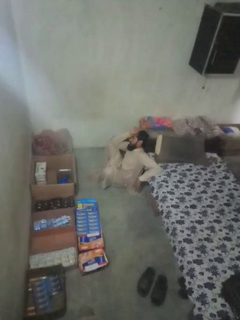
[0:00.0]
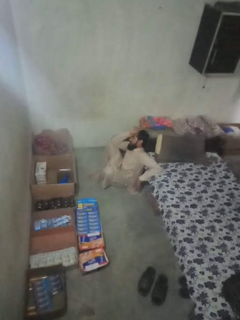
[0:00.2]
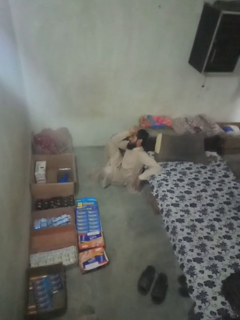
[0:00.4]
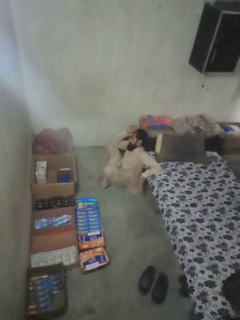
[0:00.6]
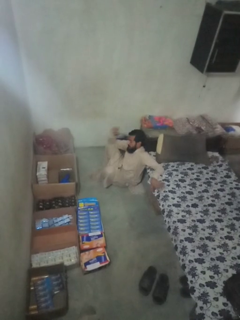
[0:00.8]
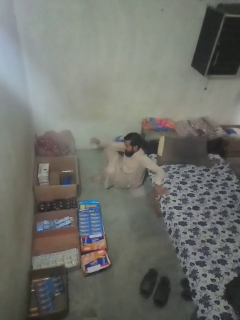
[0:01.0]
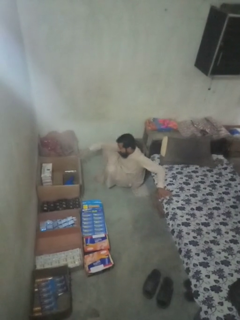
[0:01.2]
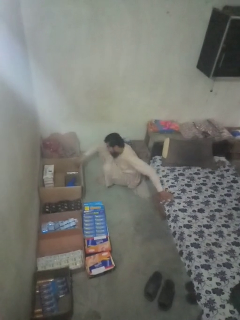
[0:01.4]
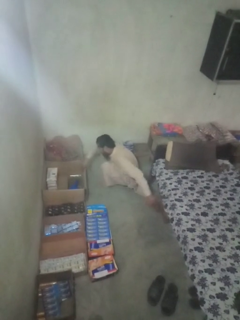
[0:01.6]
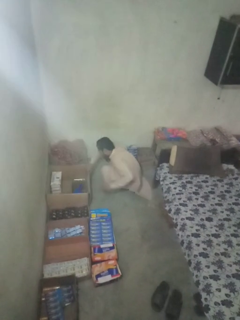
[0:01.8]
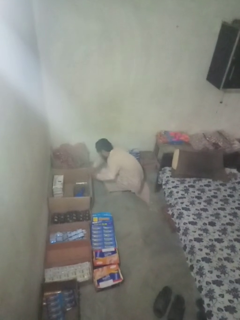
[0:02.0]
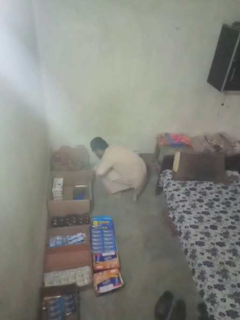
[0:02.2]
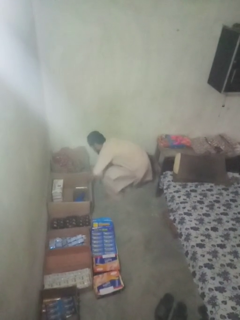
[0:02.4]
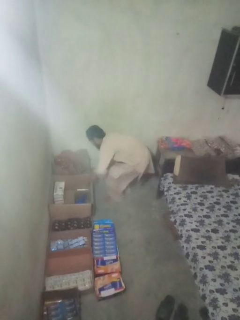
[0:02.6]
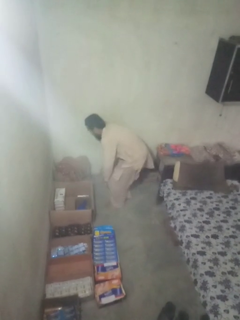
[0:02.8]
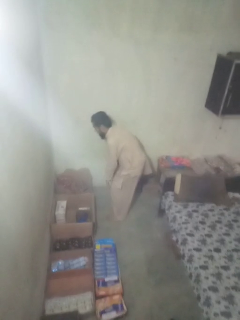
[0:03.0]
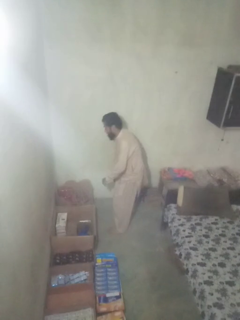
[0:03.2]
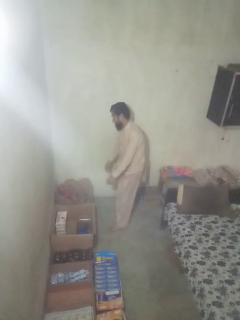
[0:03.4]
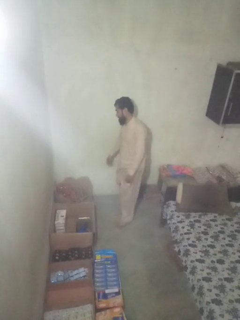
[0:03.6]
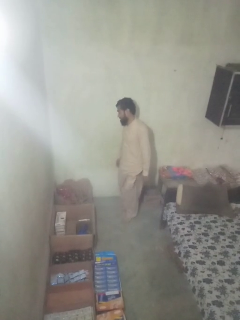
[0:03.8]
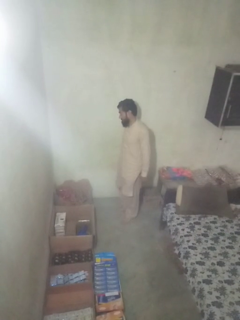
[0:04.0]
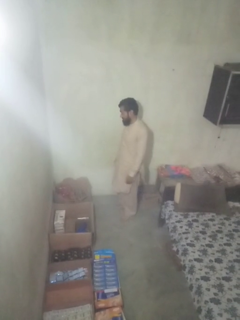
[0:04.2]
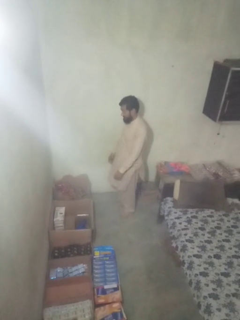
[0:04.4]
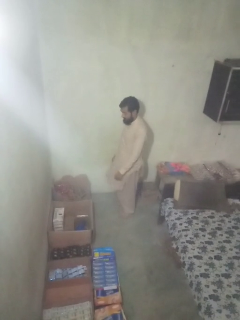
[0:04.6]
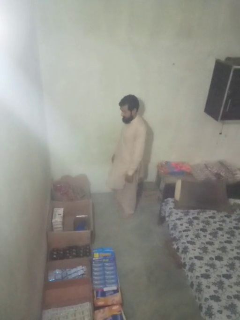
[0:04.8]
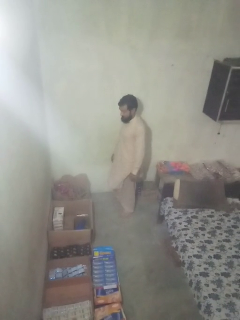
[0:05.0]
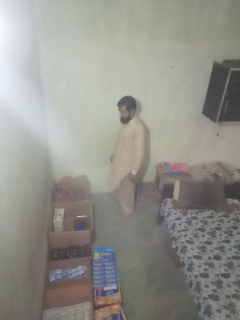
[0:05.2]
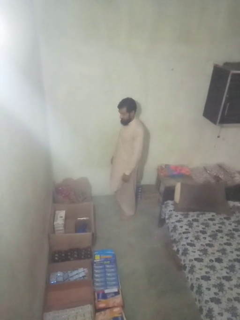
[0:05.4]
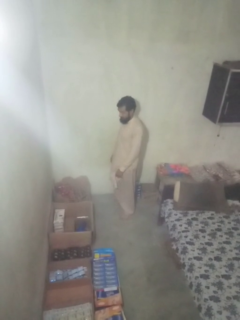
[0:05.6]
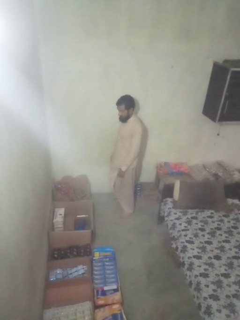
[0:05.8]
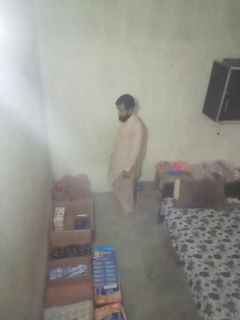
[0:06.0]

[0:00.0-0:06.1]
person stands up from floor

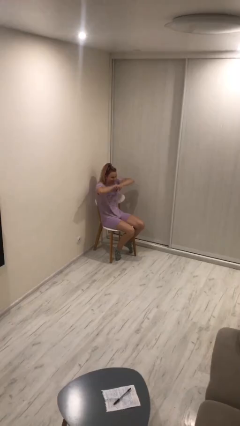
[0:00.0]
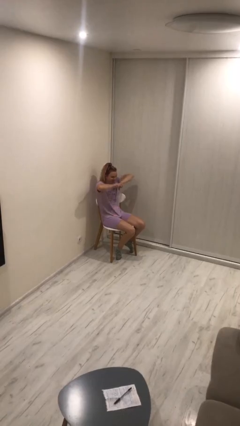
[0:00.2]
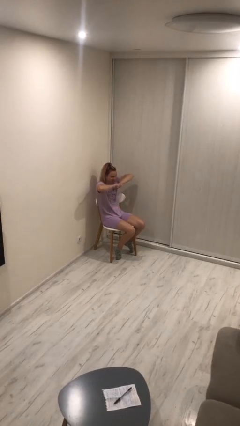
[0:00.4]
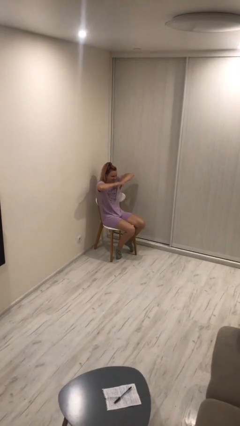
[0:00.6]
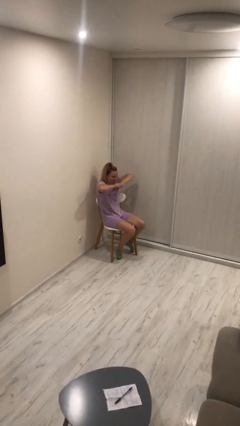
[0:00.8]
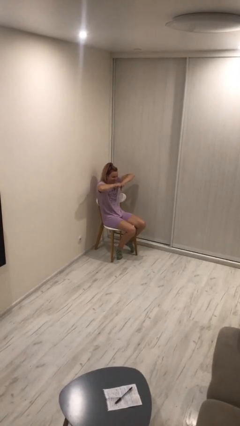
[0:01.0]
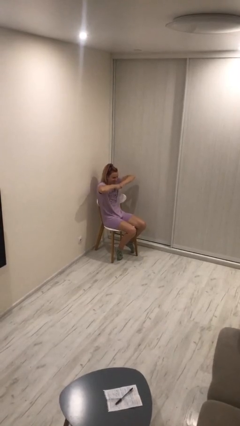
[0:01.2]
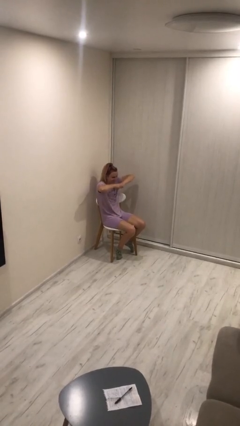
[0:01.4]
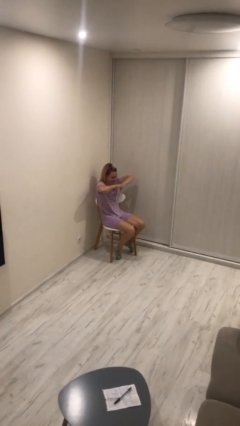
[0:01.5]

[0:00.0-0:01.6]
person cracks knuckles

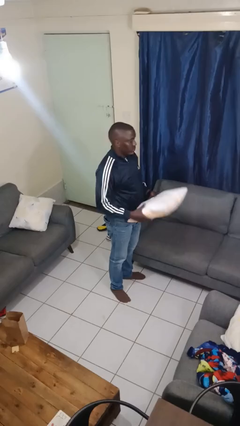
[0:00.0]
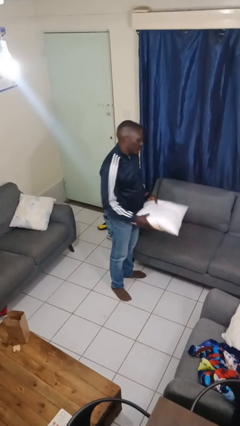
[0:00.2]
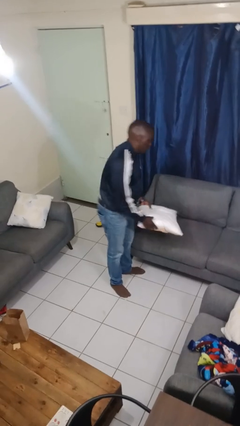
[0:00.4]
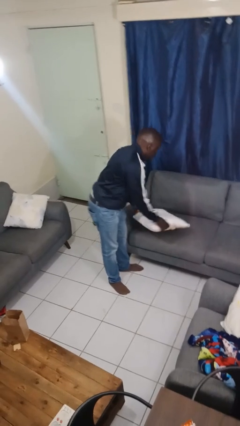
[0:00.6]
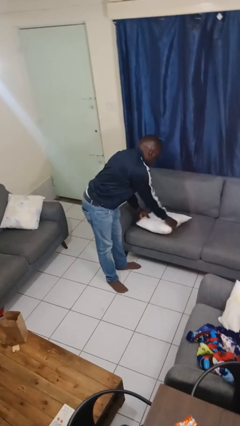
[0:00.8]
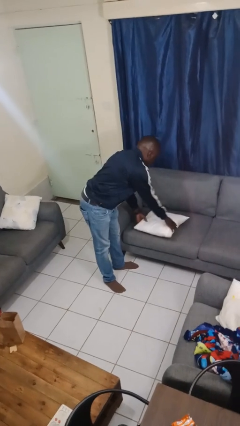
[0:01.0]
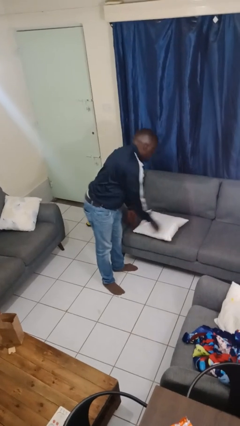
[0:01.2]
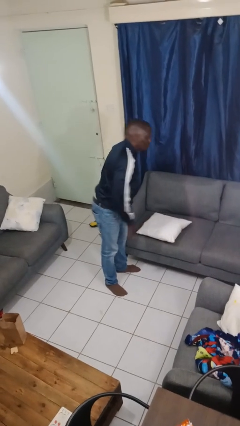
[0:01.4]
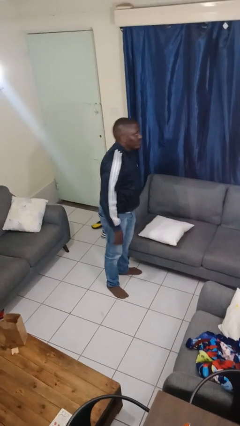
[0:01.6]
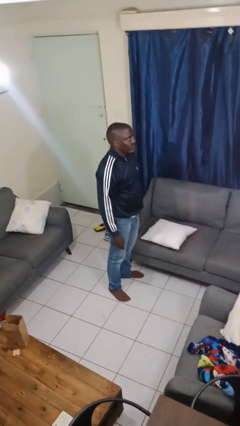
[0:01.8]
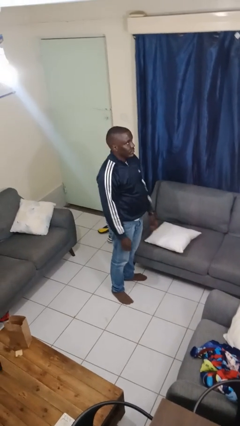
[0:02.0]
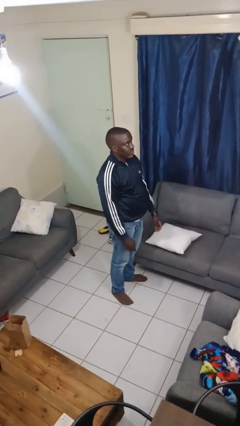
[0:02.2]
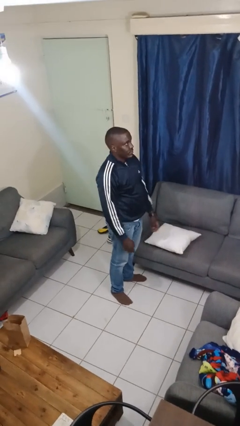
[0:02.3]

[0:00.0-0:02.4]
person puts down object on couch

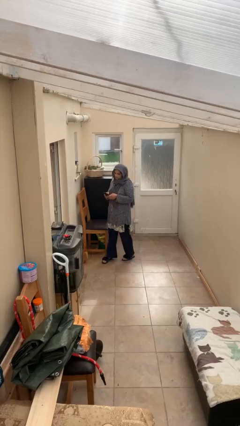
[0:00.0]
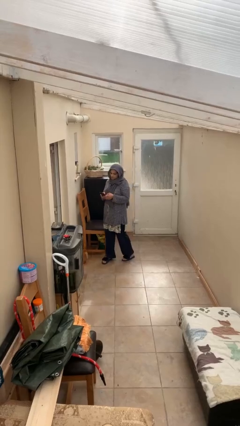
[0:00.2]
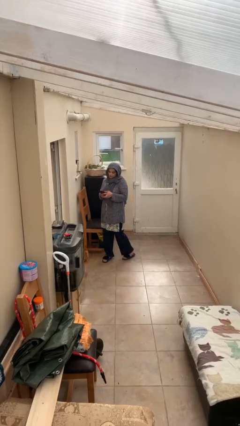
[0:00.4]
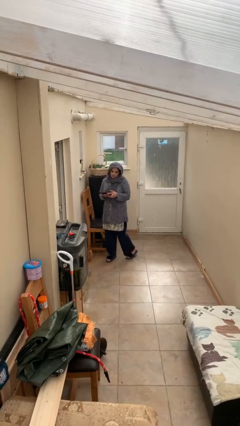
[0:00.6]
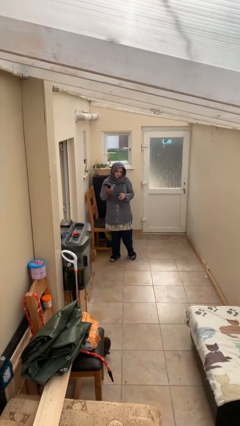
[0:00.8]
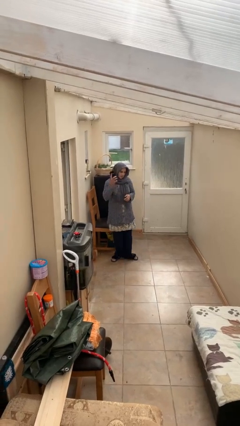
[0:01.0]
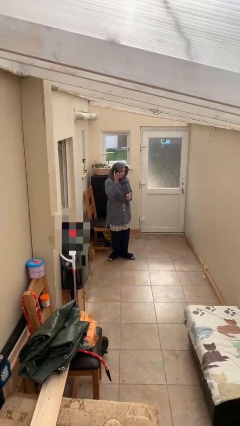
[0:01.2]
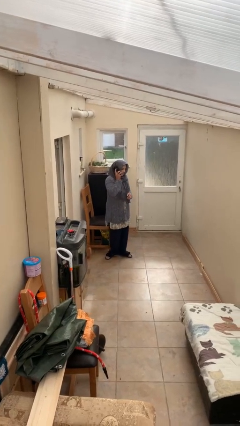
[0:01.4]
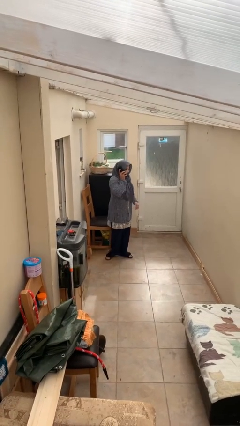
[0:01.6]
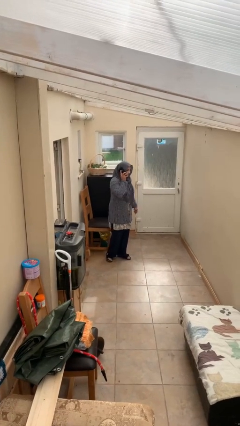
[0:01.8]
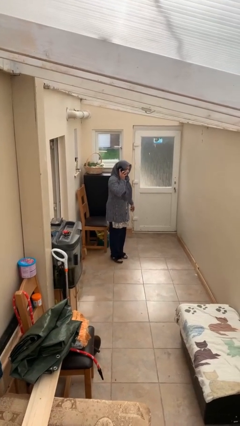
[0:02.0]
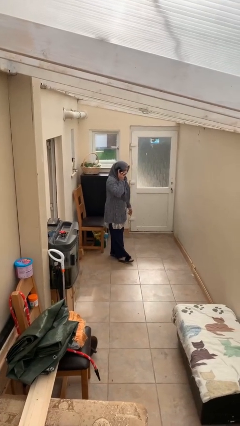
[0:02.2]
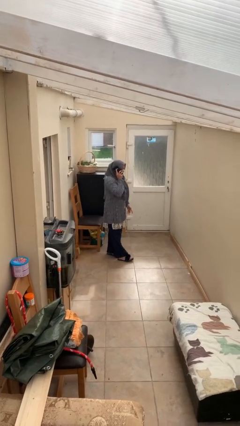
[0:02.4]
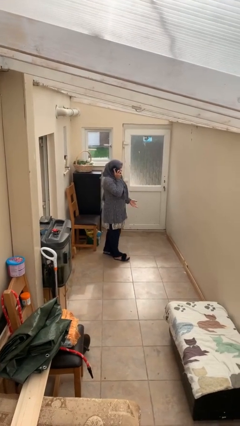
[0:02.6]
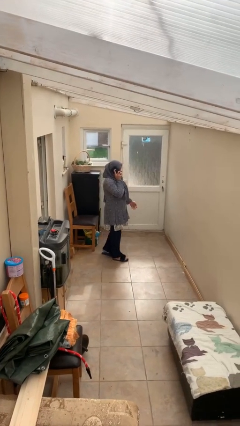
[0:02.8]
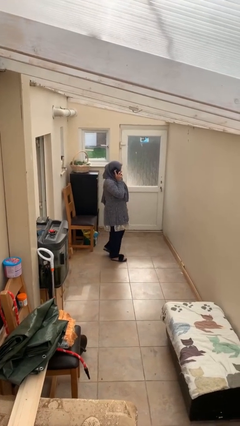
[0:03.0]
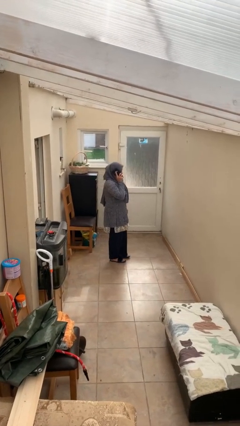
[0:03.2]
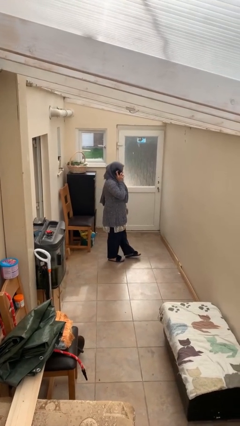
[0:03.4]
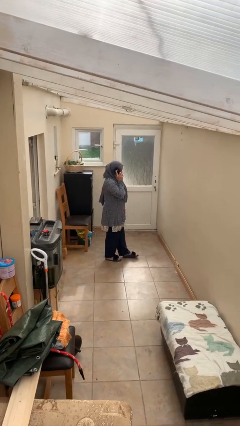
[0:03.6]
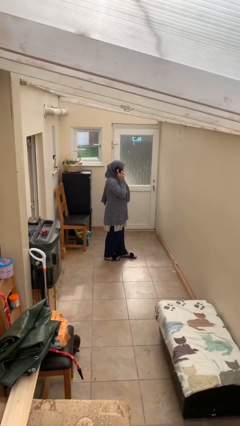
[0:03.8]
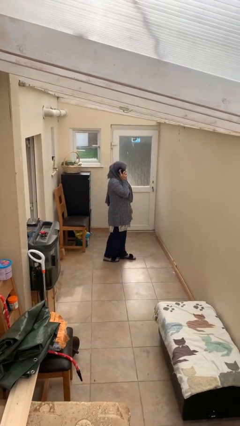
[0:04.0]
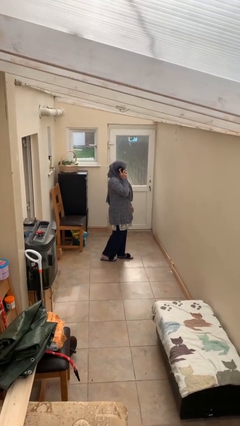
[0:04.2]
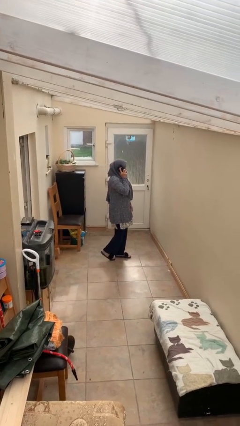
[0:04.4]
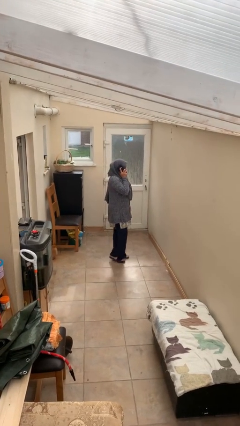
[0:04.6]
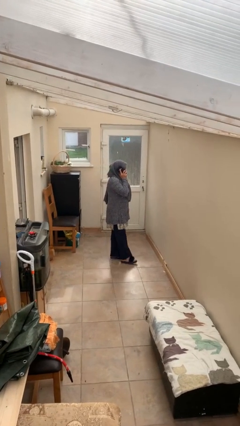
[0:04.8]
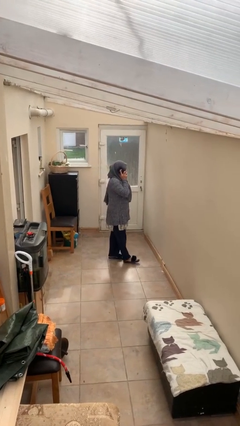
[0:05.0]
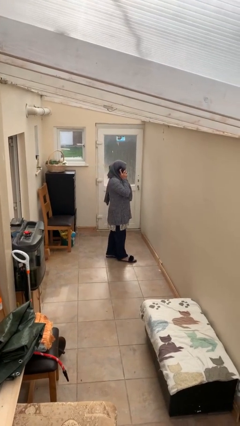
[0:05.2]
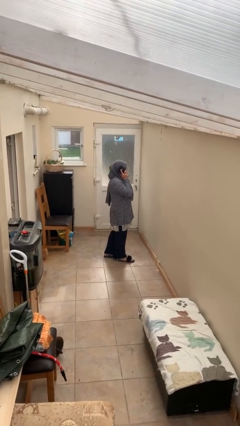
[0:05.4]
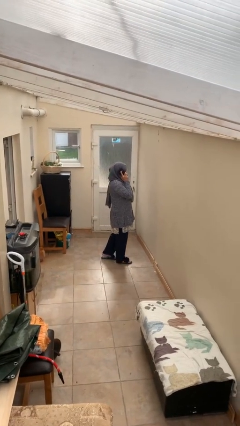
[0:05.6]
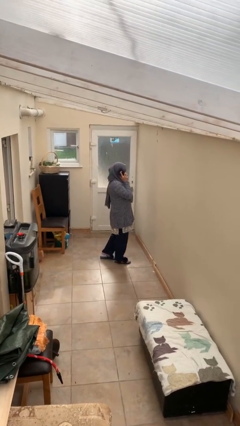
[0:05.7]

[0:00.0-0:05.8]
person talks on phone

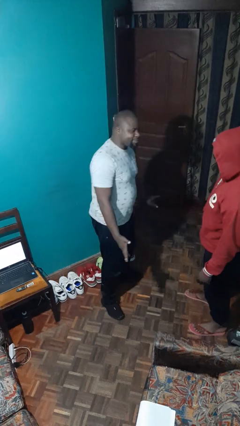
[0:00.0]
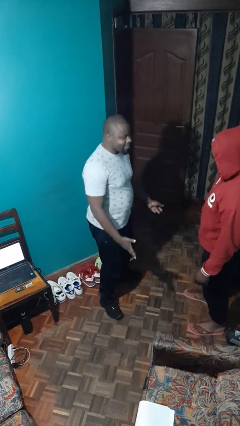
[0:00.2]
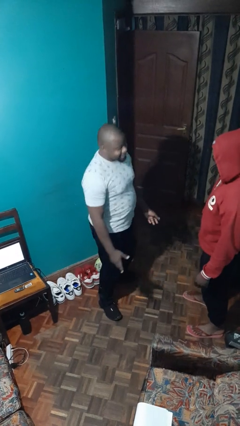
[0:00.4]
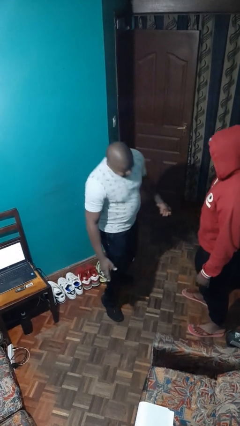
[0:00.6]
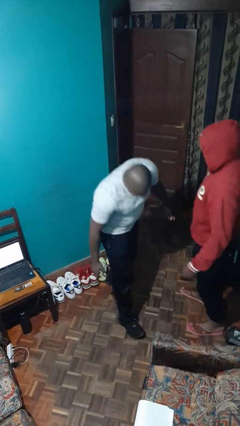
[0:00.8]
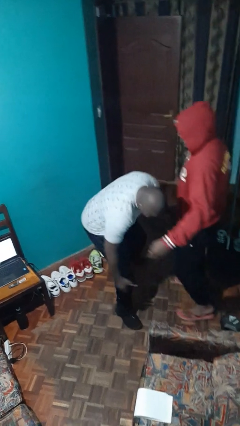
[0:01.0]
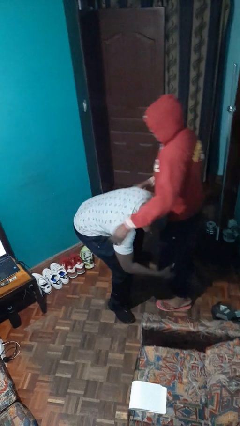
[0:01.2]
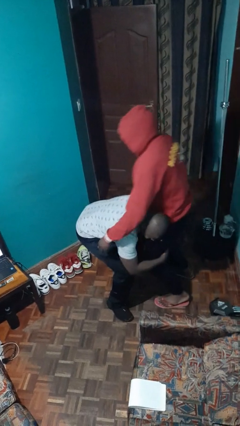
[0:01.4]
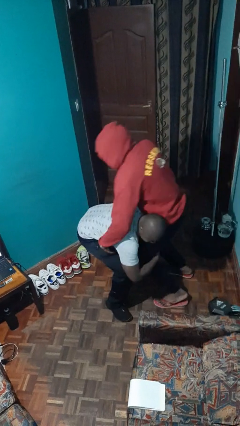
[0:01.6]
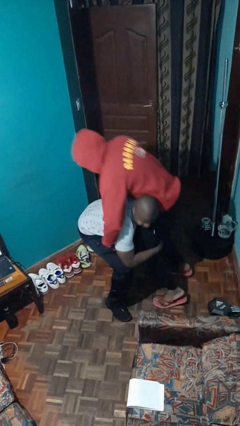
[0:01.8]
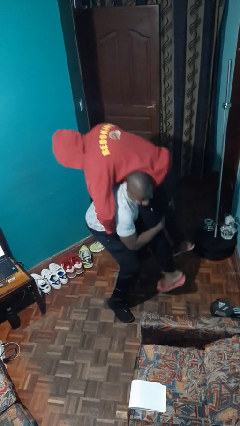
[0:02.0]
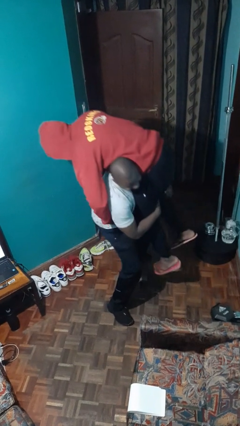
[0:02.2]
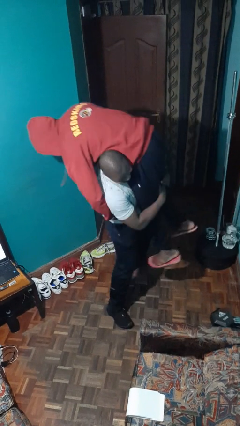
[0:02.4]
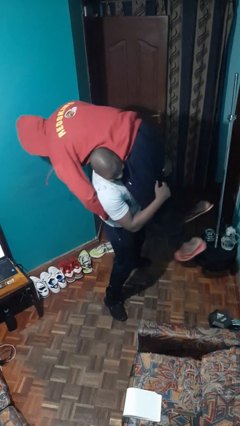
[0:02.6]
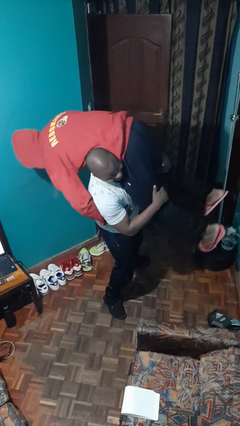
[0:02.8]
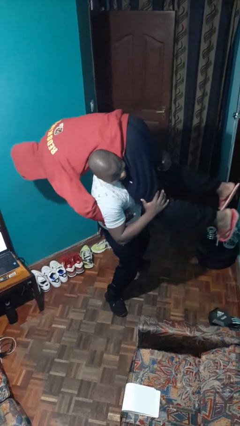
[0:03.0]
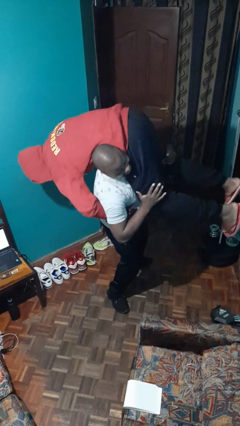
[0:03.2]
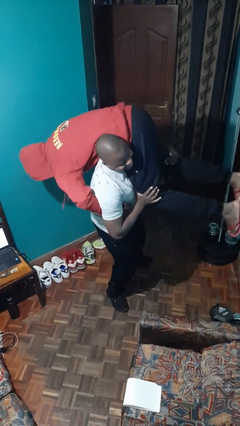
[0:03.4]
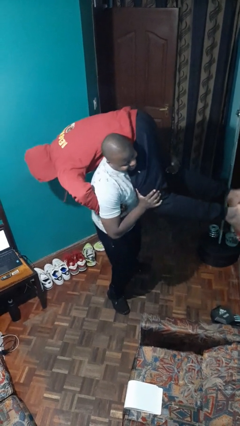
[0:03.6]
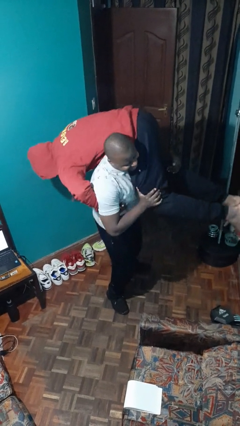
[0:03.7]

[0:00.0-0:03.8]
person carries person over shoulder
